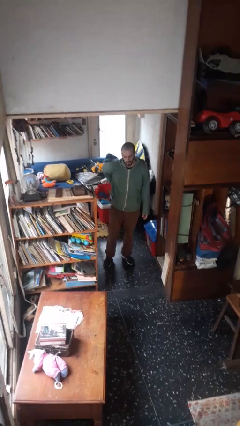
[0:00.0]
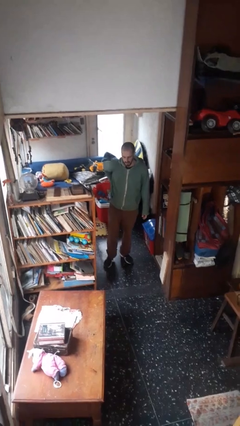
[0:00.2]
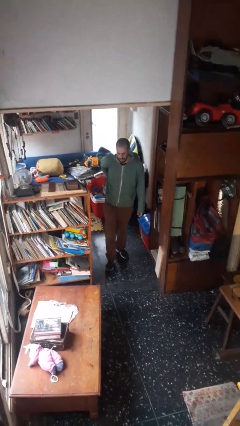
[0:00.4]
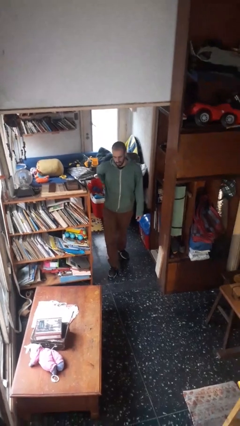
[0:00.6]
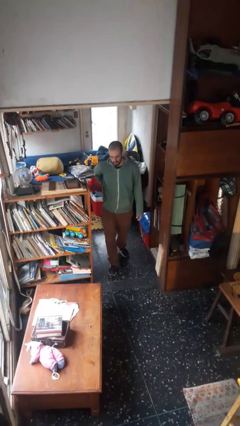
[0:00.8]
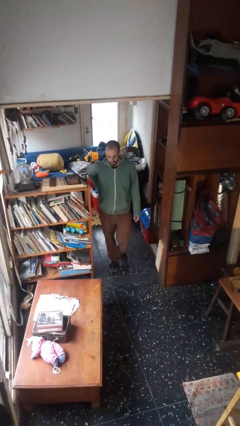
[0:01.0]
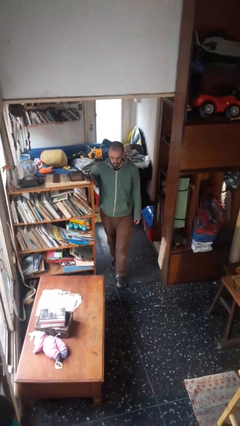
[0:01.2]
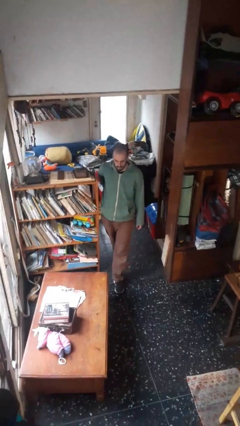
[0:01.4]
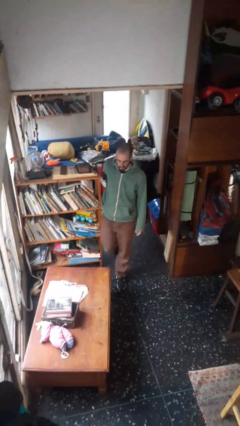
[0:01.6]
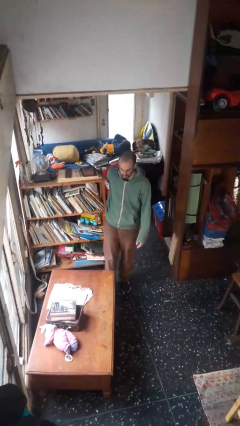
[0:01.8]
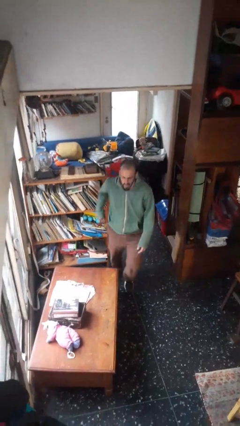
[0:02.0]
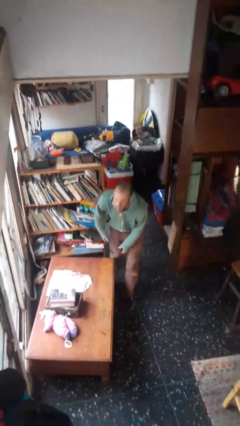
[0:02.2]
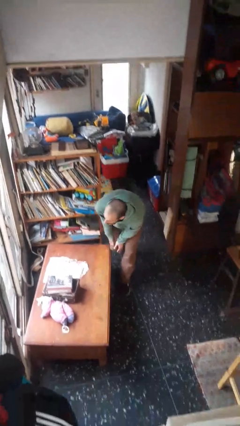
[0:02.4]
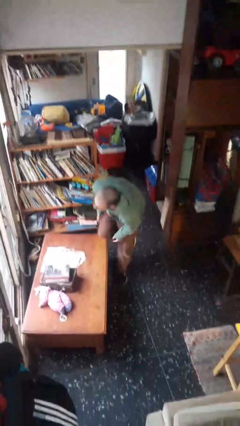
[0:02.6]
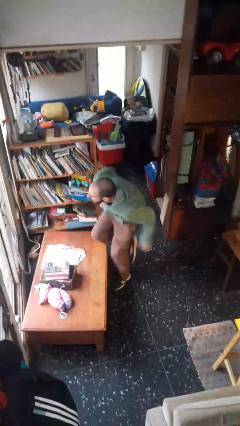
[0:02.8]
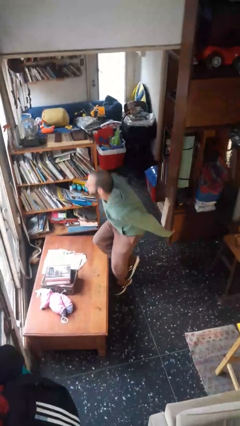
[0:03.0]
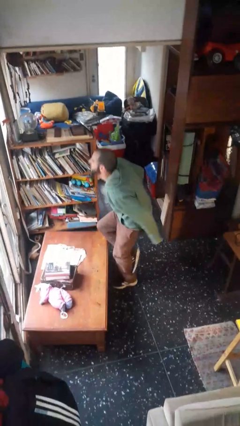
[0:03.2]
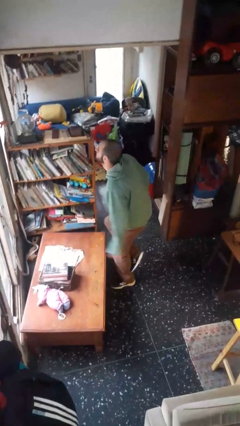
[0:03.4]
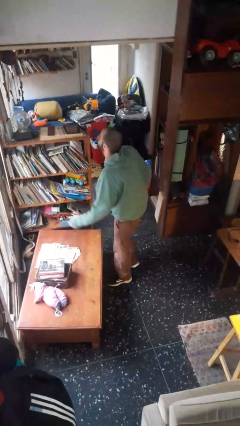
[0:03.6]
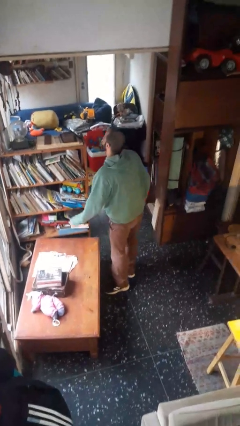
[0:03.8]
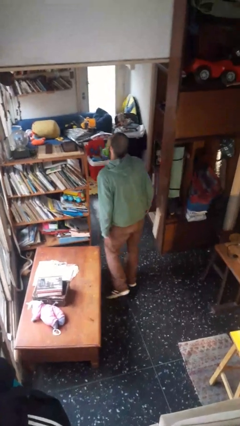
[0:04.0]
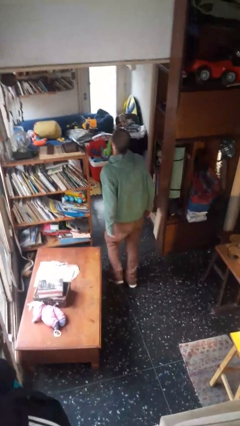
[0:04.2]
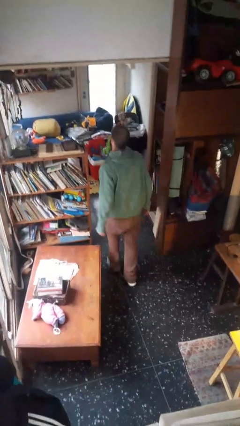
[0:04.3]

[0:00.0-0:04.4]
person bumps into table

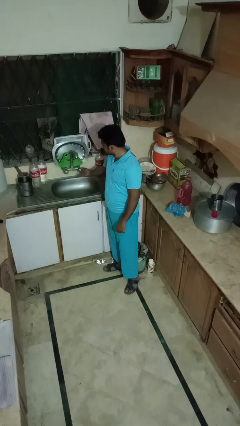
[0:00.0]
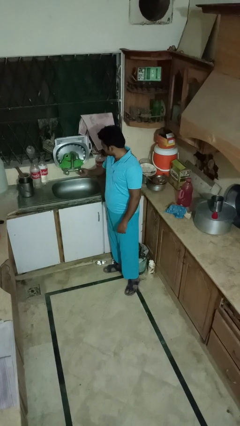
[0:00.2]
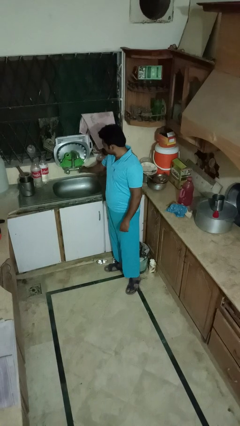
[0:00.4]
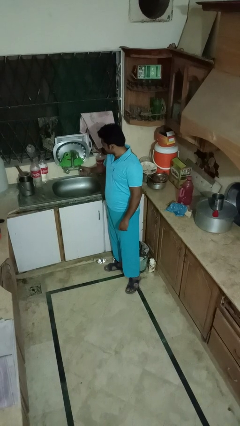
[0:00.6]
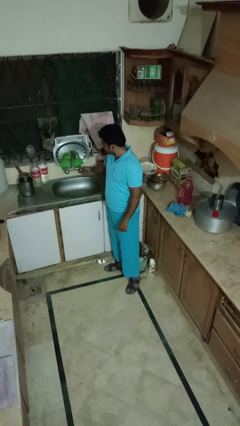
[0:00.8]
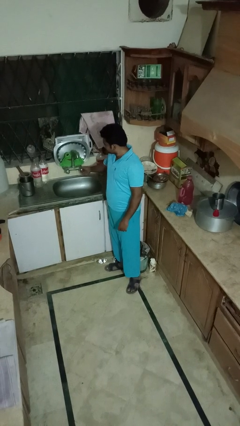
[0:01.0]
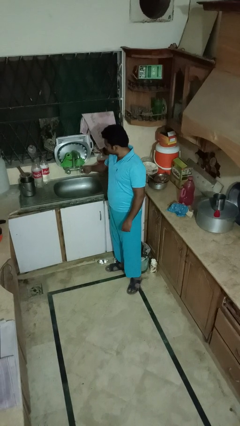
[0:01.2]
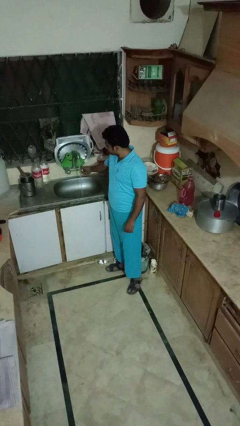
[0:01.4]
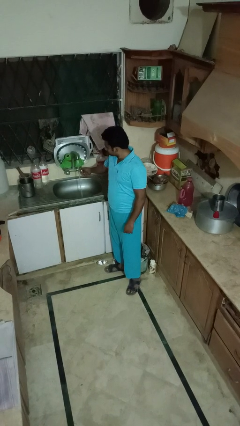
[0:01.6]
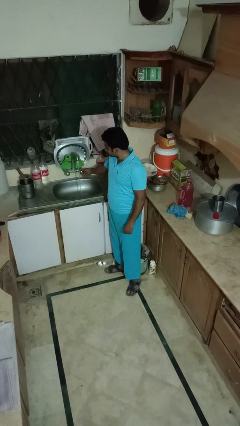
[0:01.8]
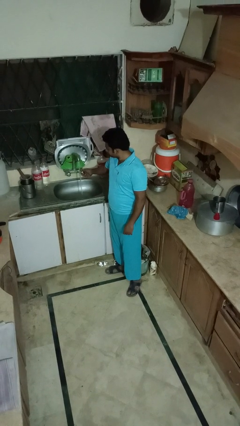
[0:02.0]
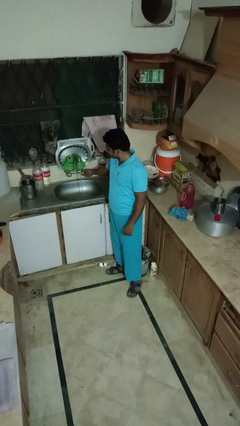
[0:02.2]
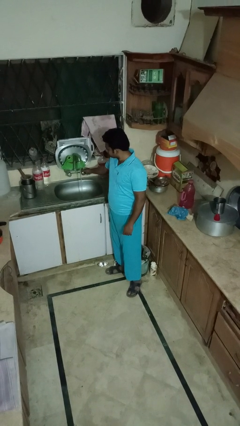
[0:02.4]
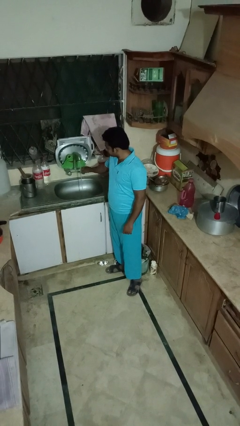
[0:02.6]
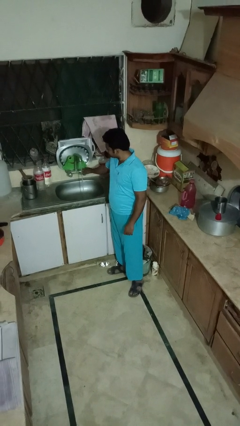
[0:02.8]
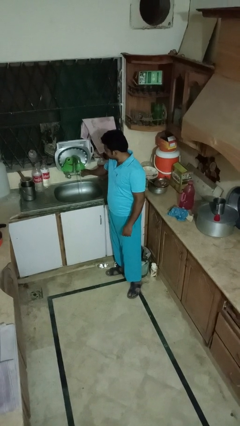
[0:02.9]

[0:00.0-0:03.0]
person turns on faucet

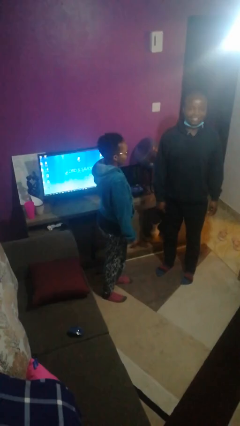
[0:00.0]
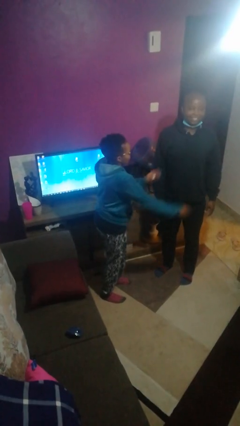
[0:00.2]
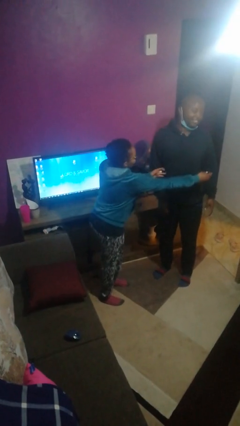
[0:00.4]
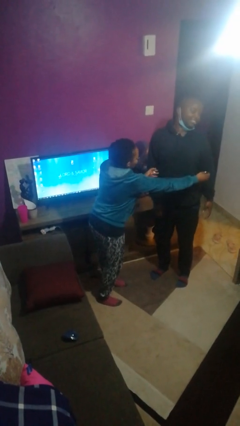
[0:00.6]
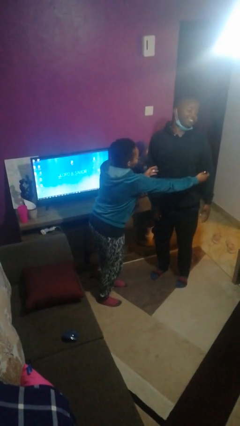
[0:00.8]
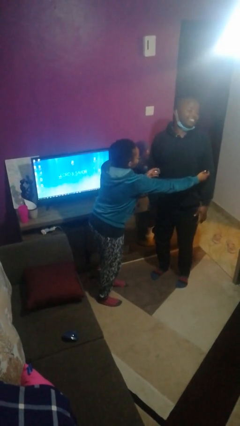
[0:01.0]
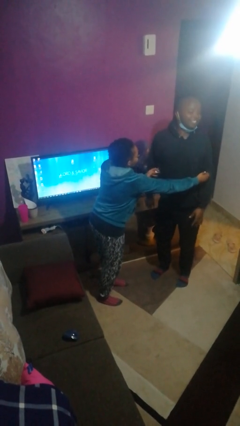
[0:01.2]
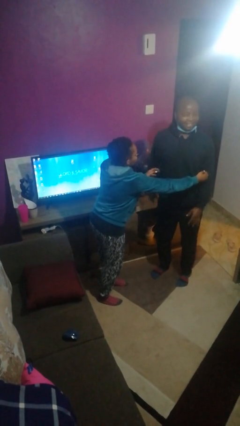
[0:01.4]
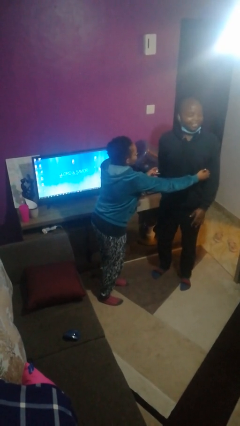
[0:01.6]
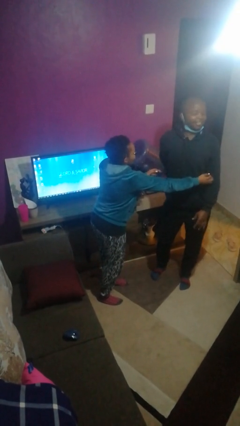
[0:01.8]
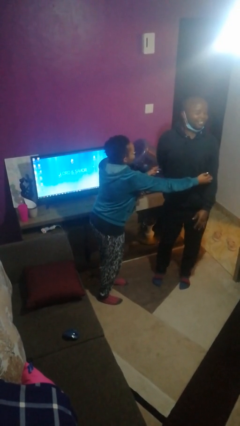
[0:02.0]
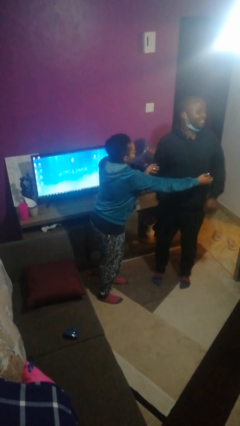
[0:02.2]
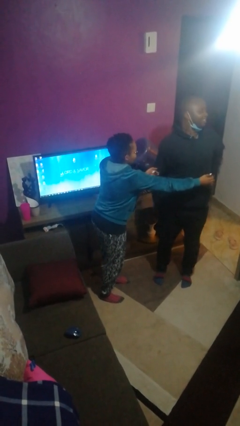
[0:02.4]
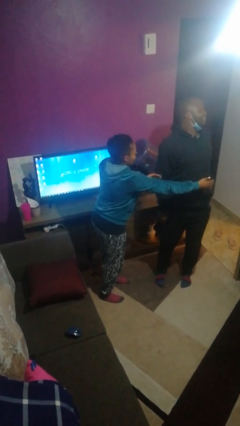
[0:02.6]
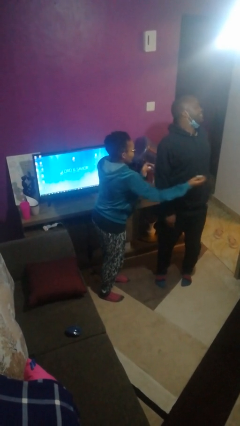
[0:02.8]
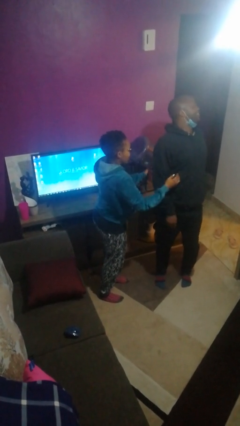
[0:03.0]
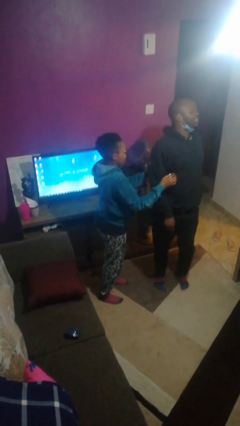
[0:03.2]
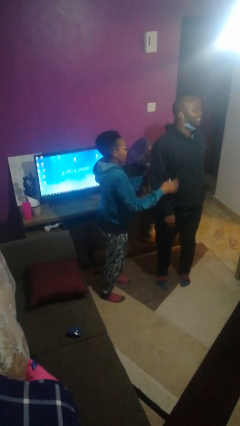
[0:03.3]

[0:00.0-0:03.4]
person tickles person

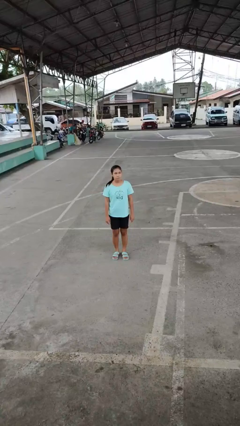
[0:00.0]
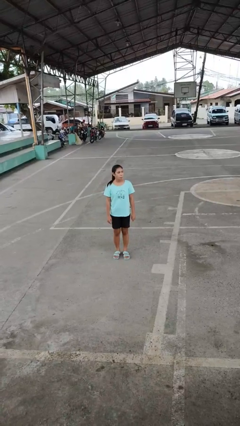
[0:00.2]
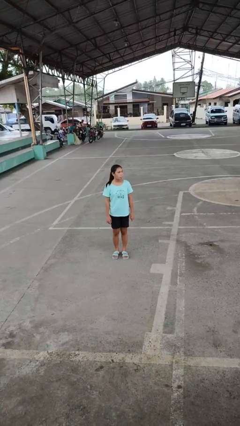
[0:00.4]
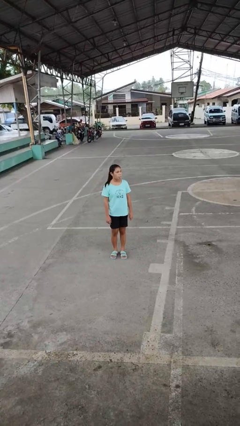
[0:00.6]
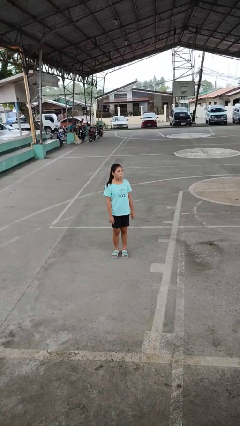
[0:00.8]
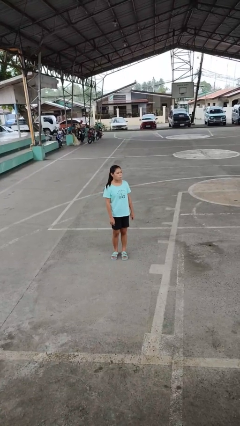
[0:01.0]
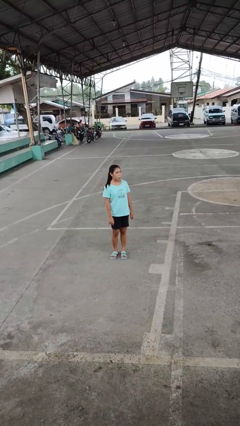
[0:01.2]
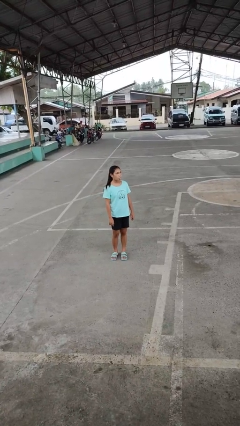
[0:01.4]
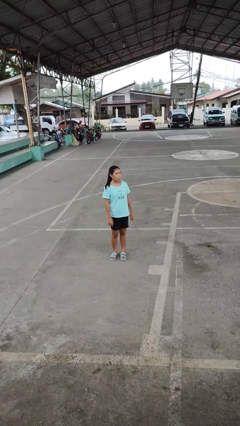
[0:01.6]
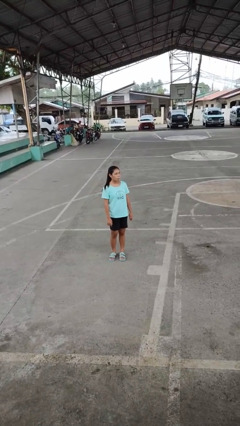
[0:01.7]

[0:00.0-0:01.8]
person sticks out tongue

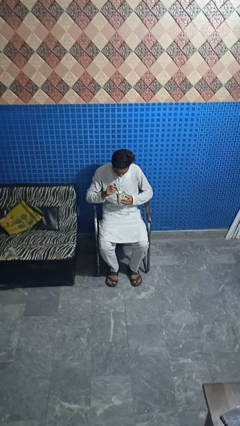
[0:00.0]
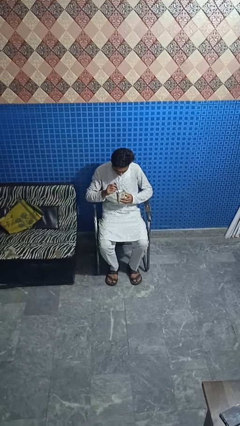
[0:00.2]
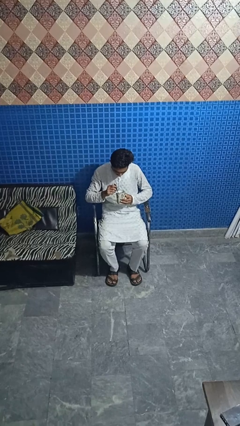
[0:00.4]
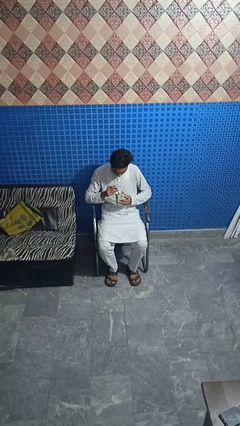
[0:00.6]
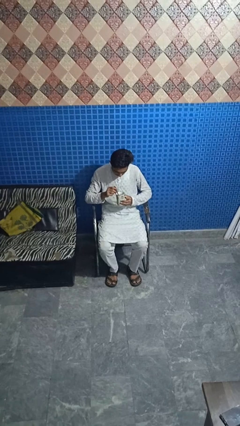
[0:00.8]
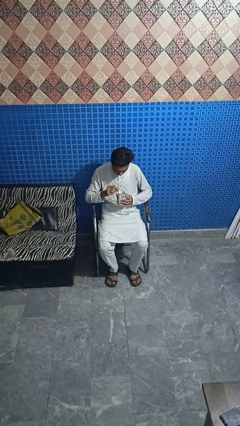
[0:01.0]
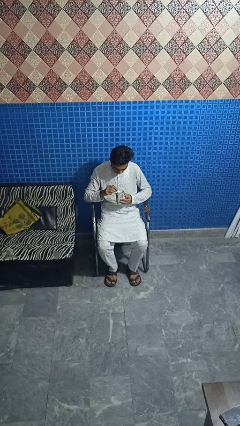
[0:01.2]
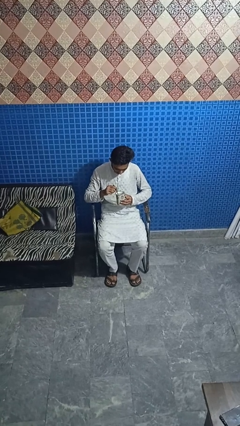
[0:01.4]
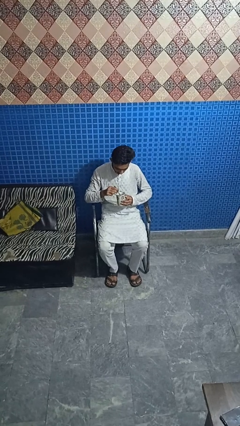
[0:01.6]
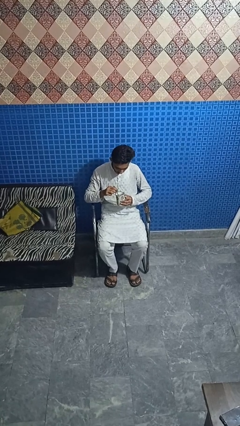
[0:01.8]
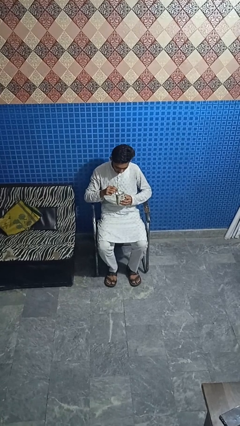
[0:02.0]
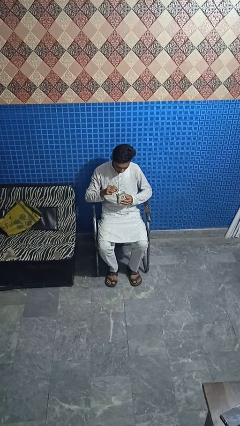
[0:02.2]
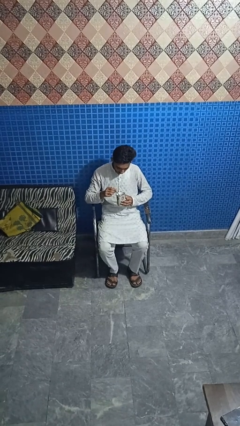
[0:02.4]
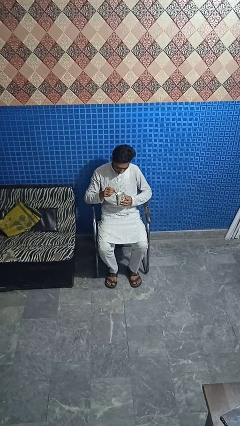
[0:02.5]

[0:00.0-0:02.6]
person stirs mug

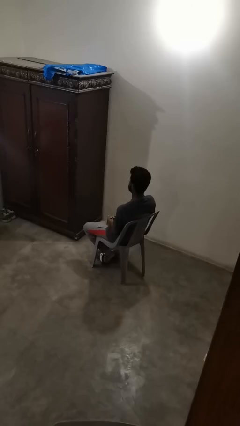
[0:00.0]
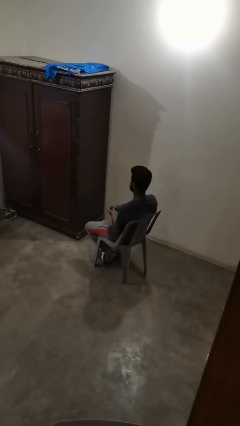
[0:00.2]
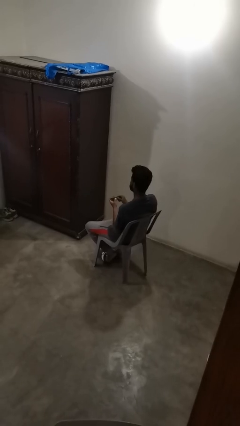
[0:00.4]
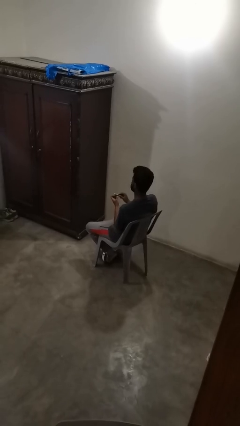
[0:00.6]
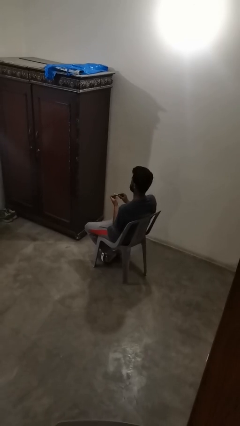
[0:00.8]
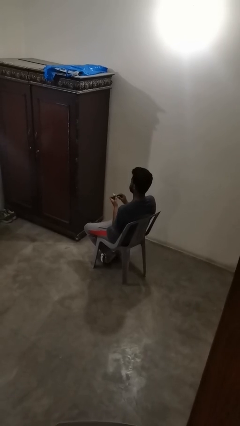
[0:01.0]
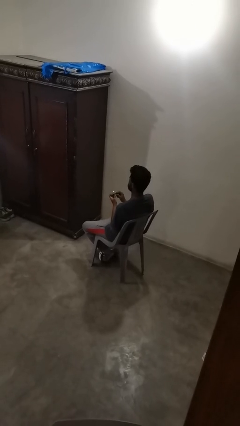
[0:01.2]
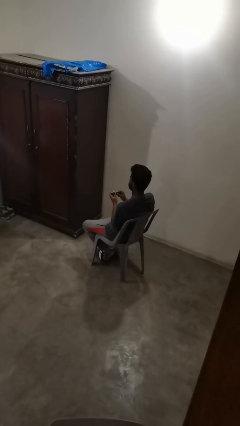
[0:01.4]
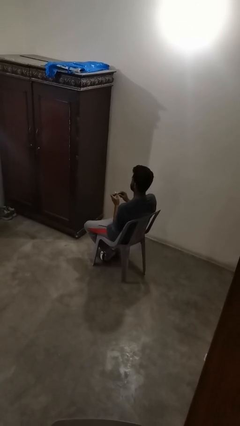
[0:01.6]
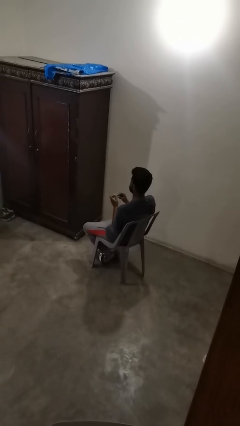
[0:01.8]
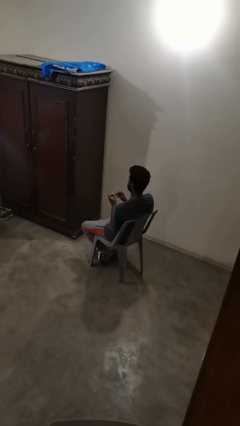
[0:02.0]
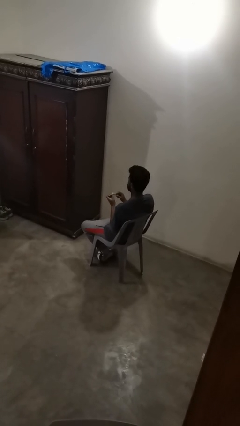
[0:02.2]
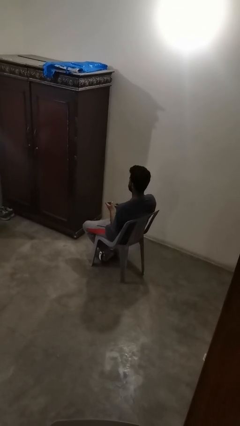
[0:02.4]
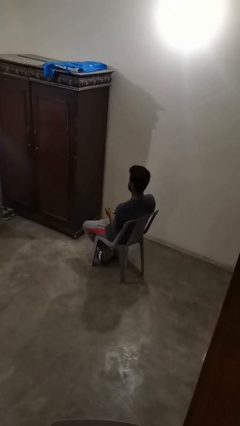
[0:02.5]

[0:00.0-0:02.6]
person files fingernails
